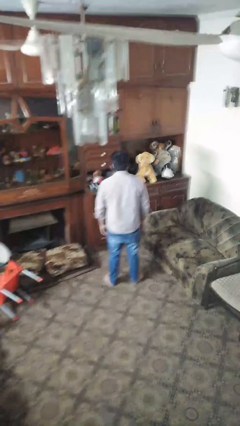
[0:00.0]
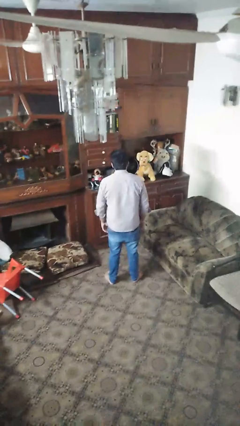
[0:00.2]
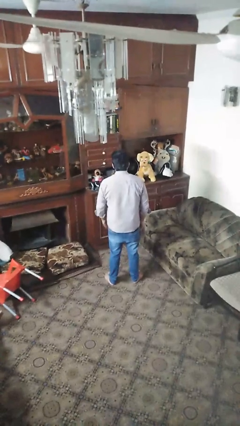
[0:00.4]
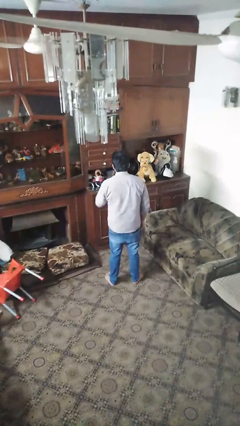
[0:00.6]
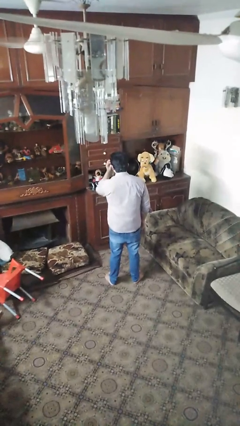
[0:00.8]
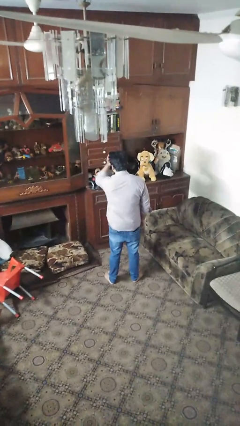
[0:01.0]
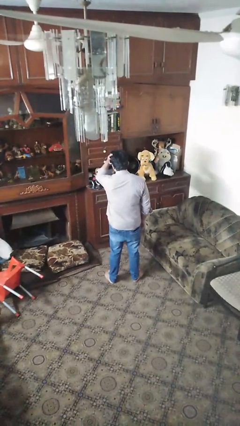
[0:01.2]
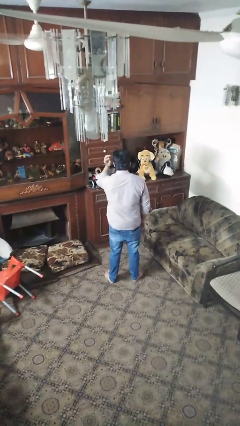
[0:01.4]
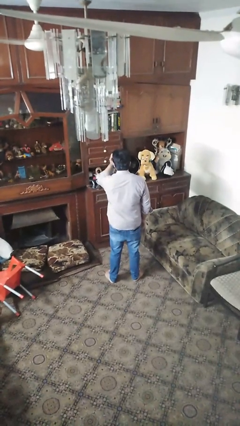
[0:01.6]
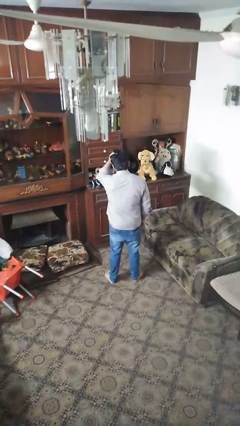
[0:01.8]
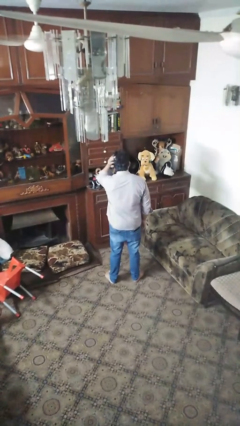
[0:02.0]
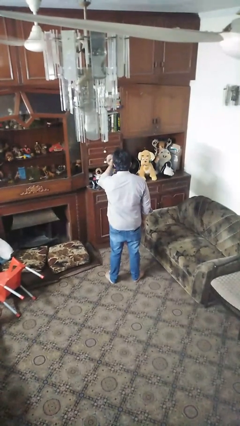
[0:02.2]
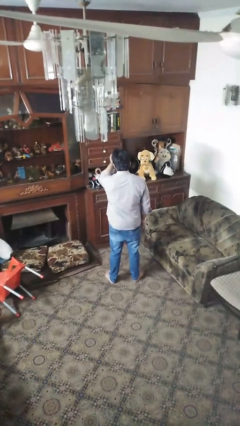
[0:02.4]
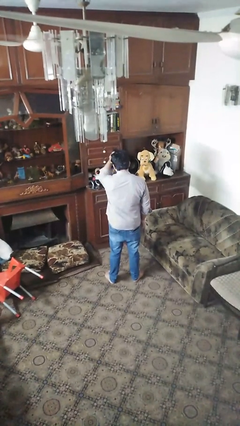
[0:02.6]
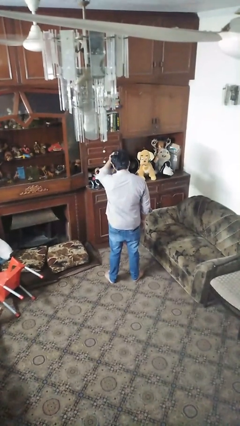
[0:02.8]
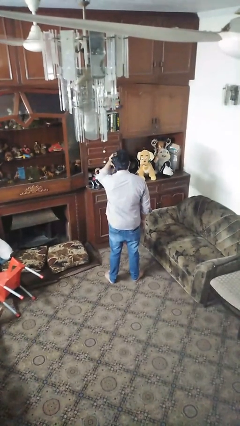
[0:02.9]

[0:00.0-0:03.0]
person strokes hair

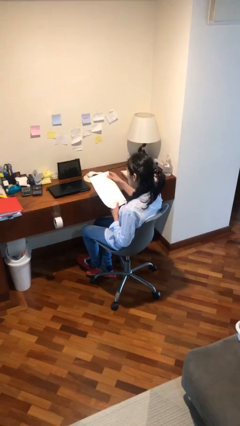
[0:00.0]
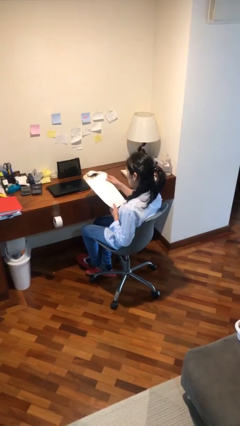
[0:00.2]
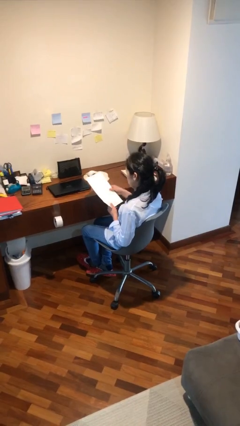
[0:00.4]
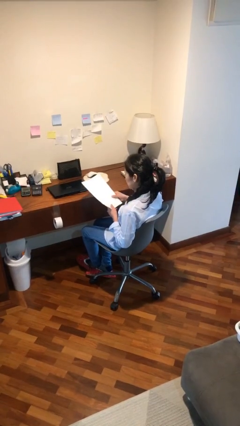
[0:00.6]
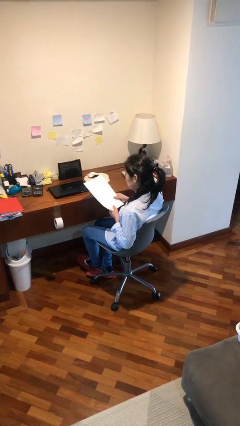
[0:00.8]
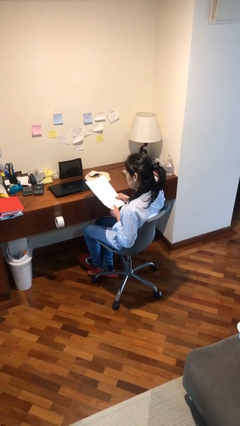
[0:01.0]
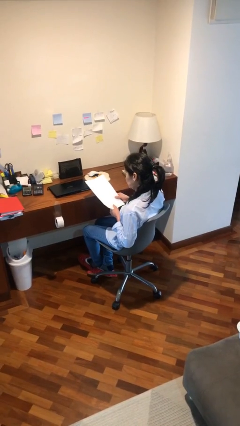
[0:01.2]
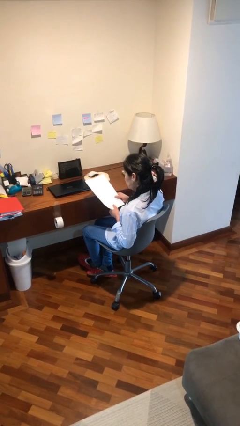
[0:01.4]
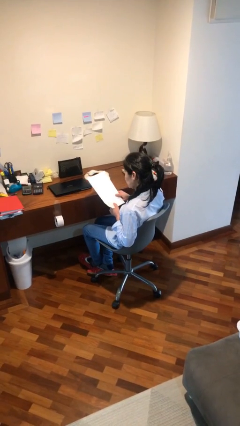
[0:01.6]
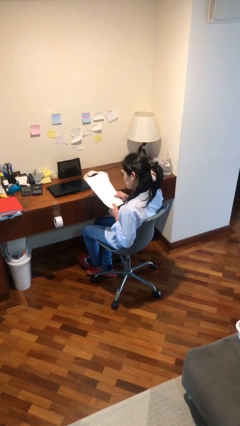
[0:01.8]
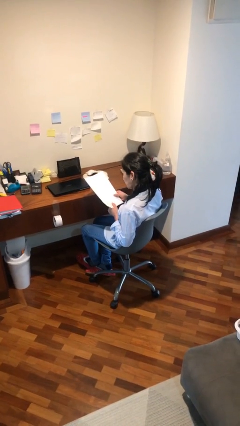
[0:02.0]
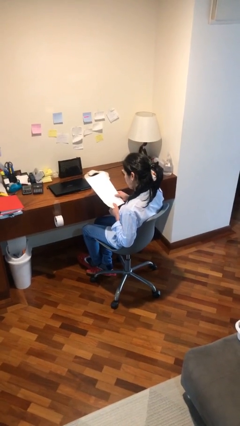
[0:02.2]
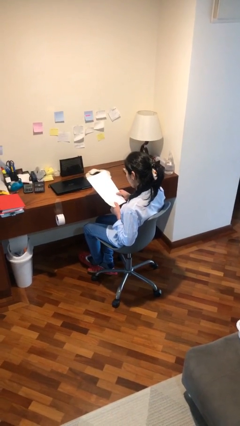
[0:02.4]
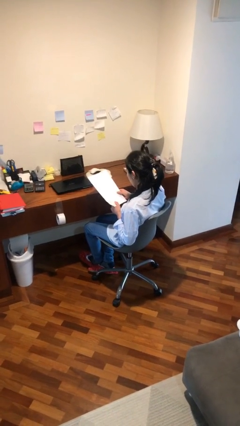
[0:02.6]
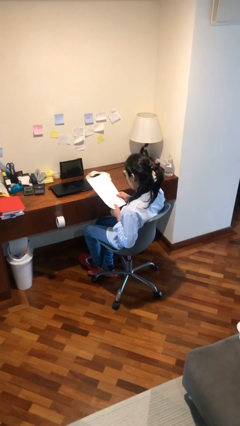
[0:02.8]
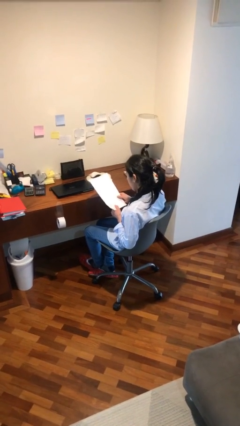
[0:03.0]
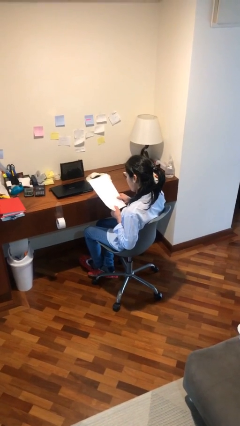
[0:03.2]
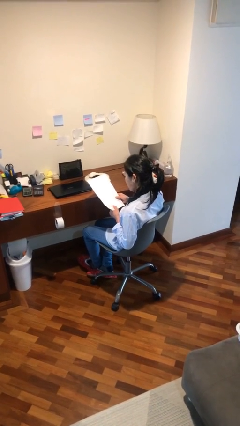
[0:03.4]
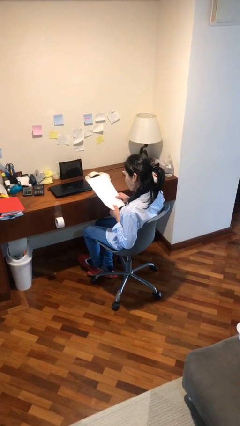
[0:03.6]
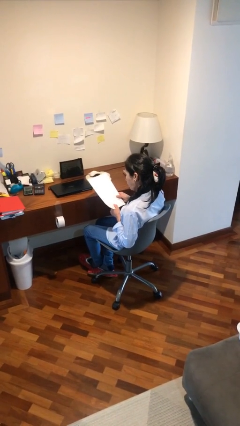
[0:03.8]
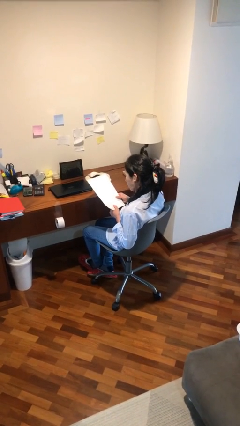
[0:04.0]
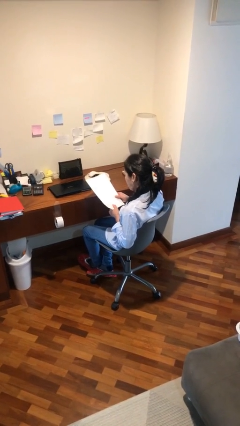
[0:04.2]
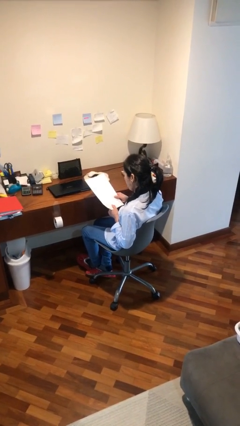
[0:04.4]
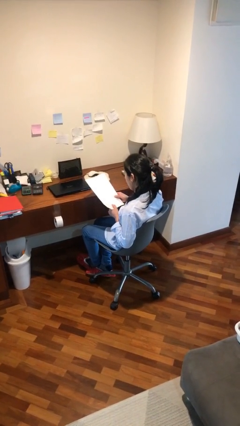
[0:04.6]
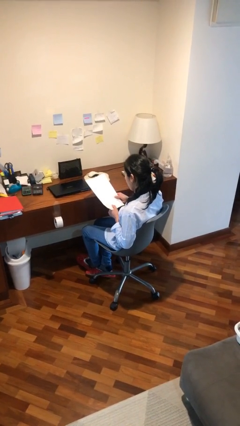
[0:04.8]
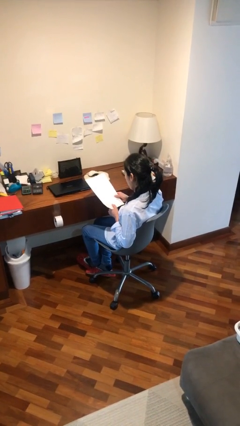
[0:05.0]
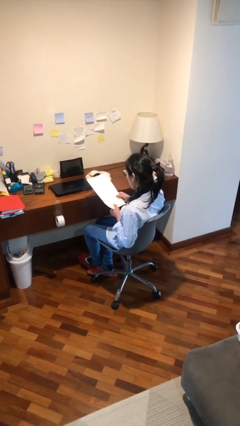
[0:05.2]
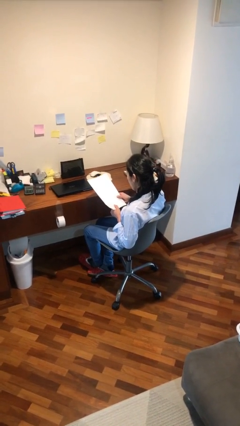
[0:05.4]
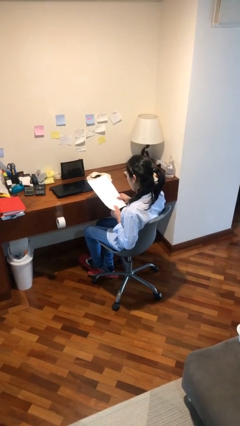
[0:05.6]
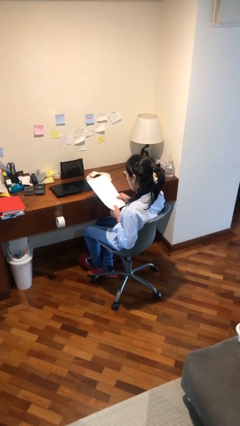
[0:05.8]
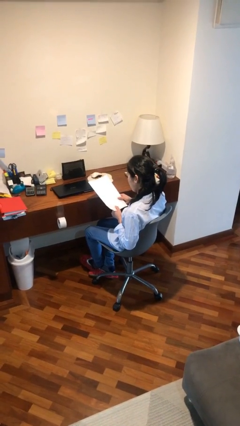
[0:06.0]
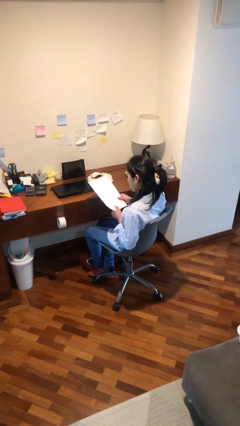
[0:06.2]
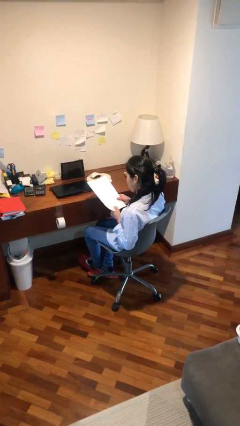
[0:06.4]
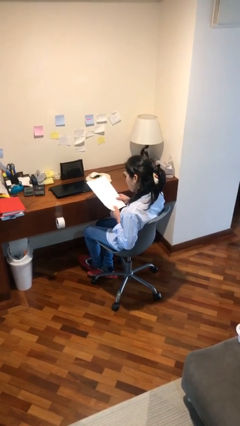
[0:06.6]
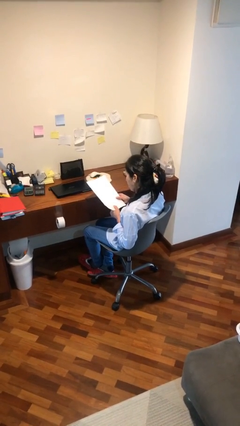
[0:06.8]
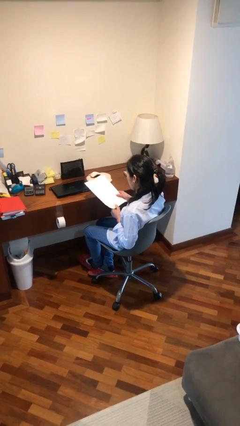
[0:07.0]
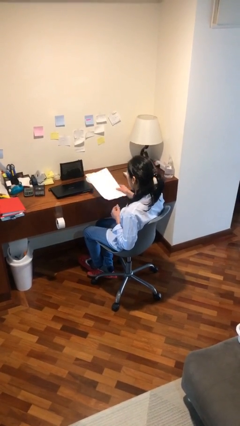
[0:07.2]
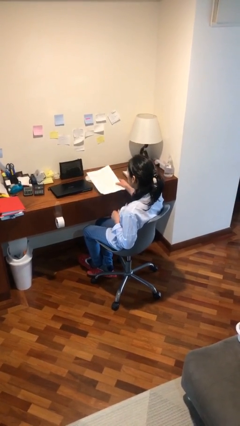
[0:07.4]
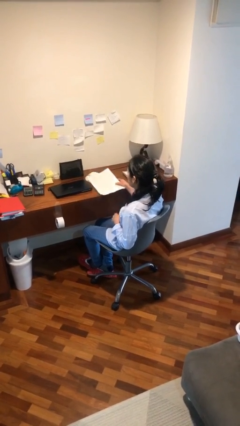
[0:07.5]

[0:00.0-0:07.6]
person reads document

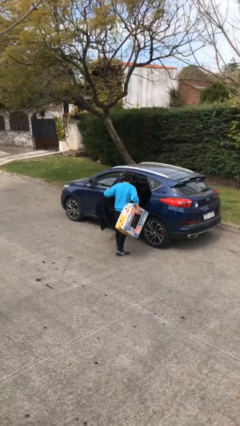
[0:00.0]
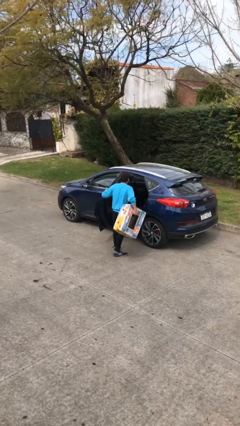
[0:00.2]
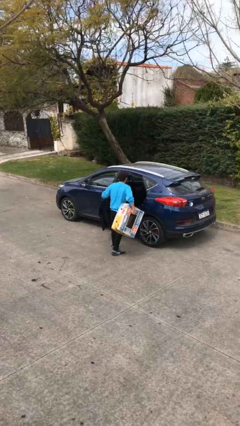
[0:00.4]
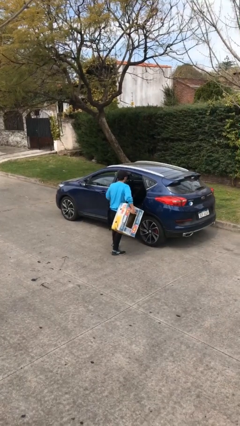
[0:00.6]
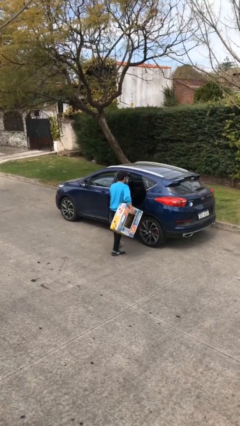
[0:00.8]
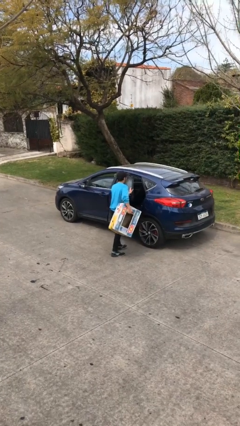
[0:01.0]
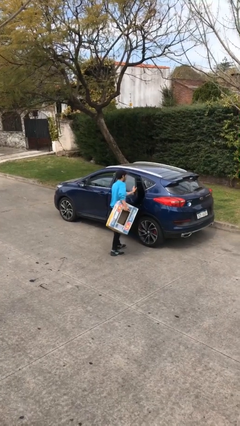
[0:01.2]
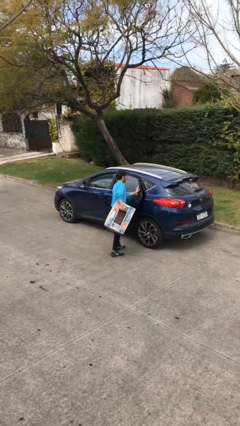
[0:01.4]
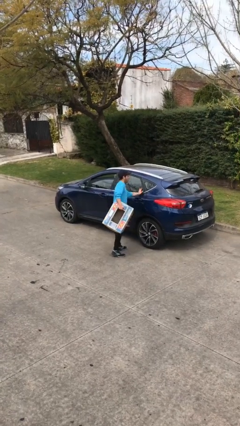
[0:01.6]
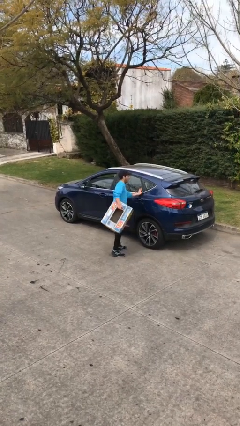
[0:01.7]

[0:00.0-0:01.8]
person closes car door

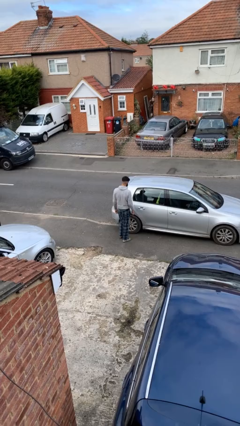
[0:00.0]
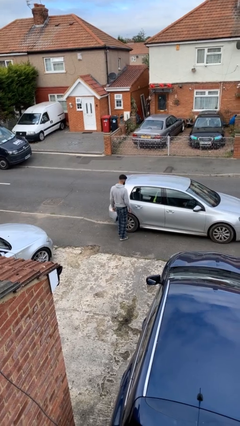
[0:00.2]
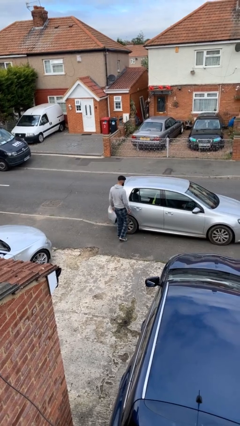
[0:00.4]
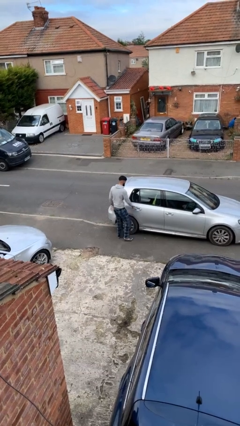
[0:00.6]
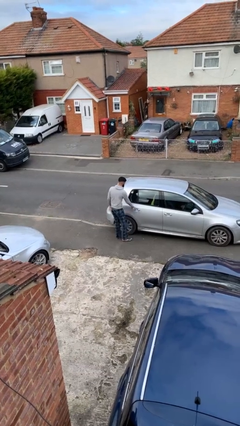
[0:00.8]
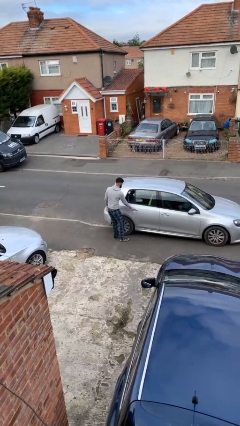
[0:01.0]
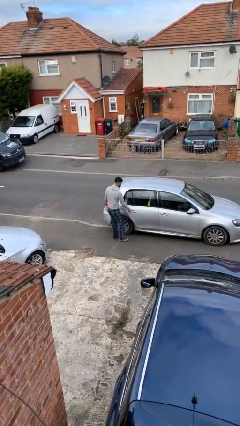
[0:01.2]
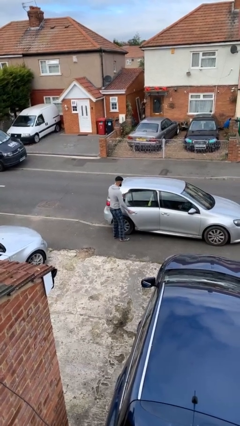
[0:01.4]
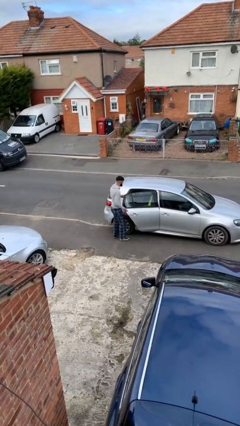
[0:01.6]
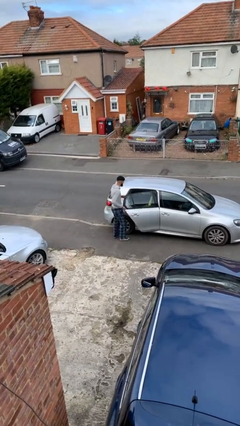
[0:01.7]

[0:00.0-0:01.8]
person opens car door

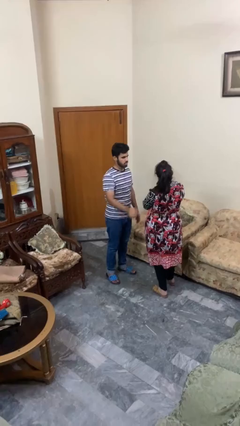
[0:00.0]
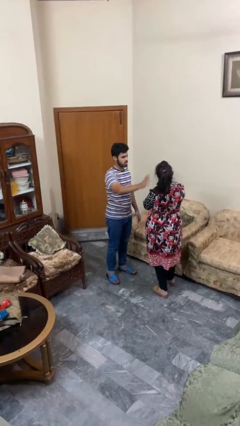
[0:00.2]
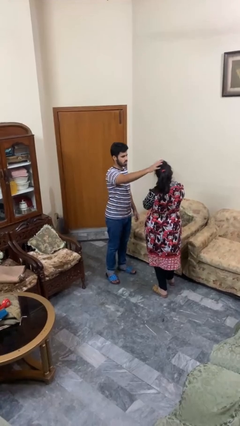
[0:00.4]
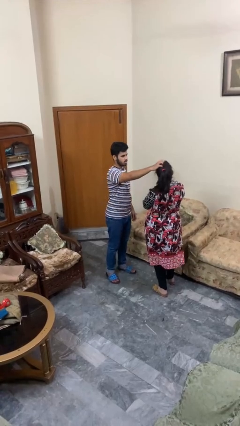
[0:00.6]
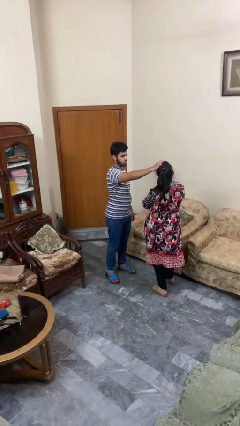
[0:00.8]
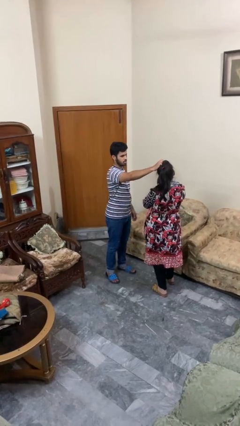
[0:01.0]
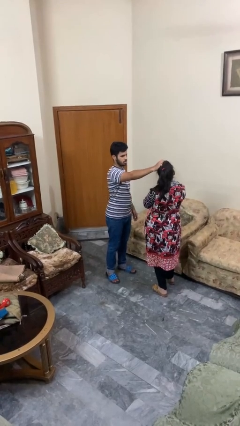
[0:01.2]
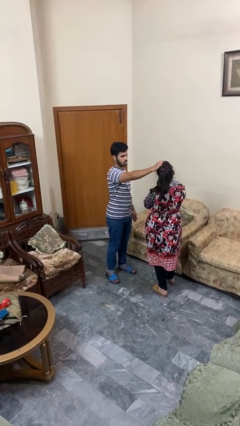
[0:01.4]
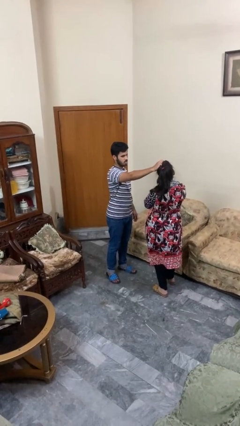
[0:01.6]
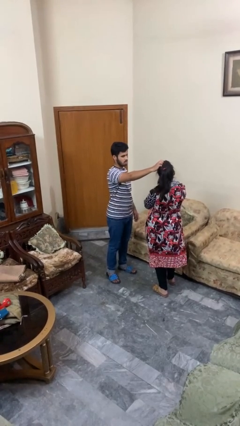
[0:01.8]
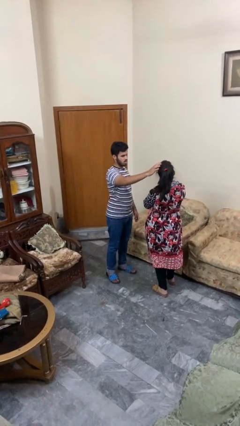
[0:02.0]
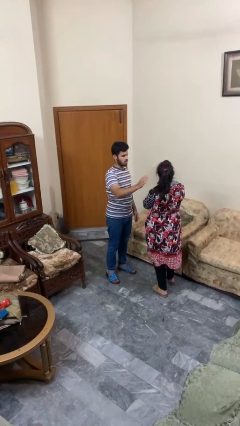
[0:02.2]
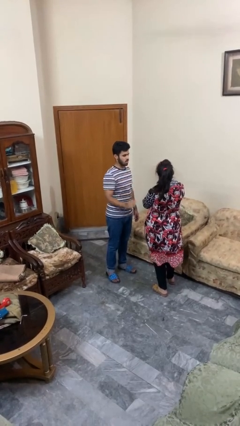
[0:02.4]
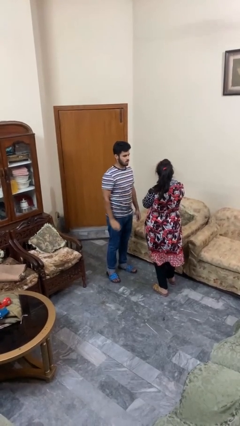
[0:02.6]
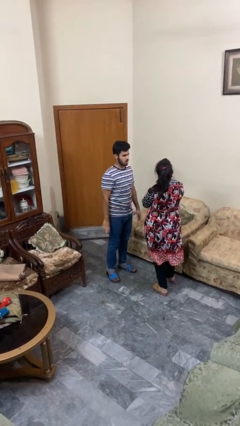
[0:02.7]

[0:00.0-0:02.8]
person grabs person by hair
